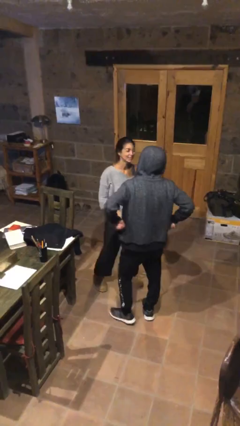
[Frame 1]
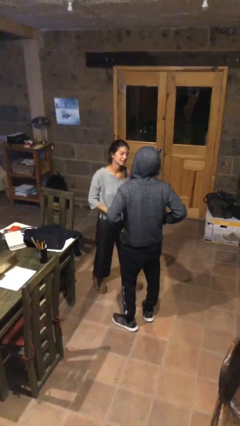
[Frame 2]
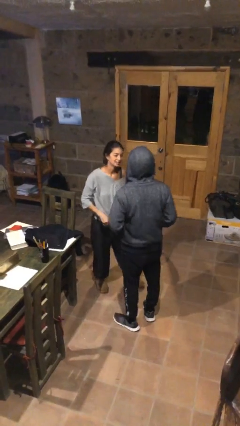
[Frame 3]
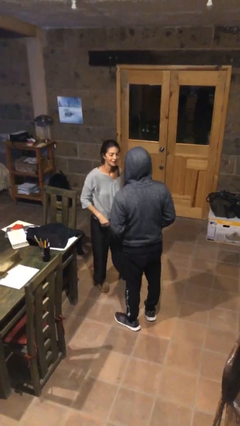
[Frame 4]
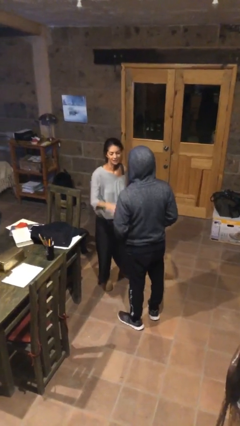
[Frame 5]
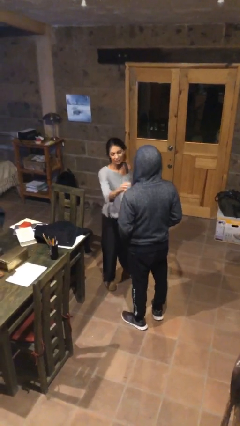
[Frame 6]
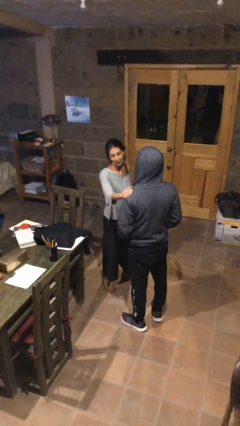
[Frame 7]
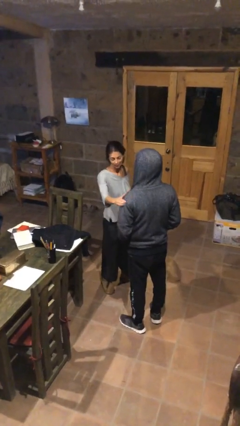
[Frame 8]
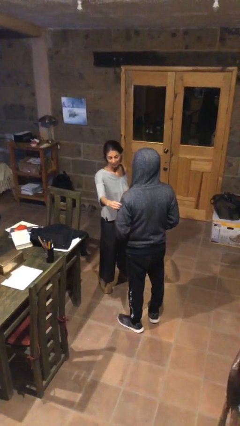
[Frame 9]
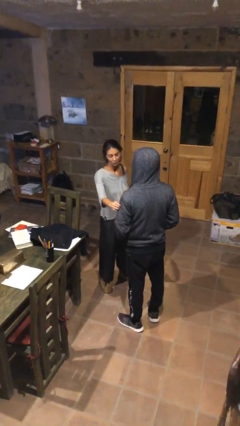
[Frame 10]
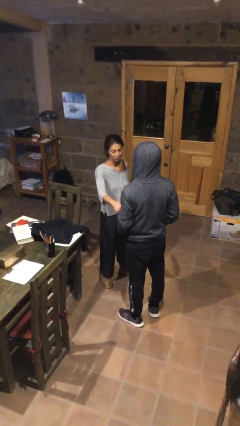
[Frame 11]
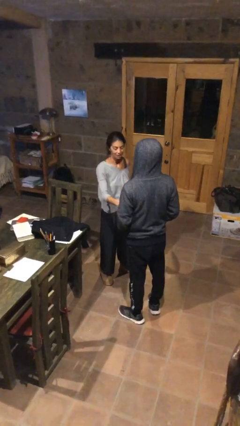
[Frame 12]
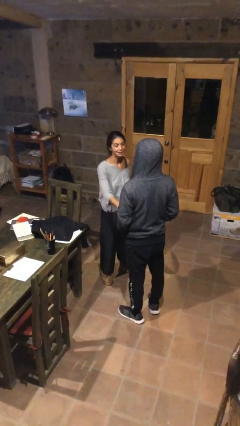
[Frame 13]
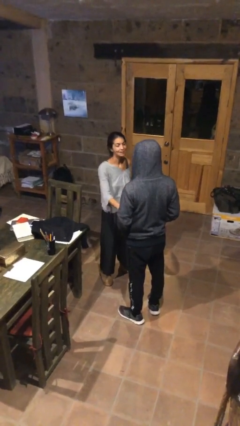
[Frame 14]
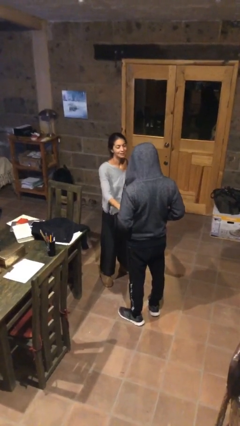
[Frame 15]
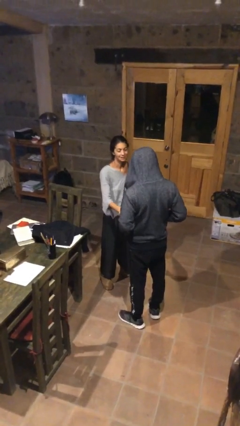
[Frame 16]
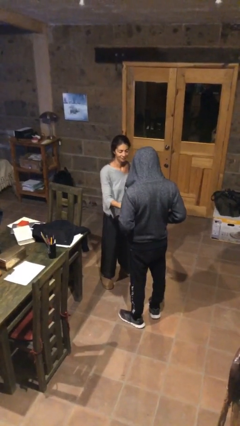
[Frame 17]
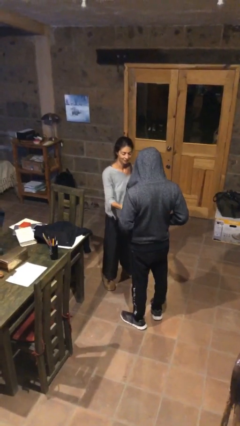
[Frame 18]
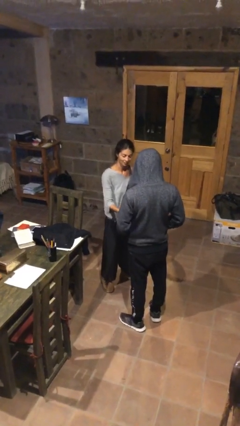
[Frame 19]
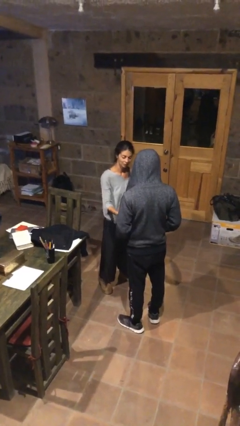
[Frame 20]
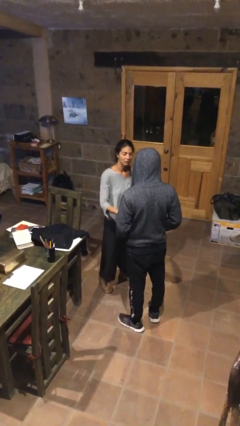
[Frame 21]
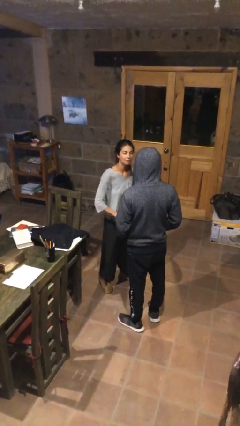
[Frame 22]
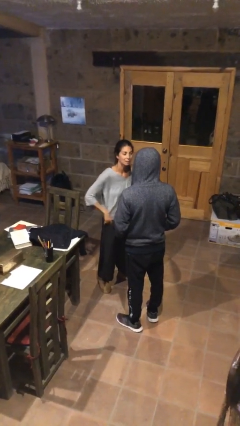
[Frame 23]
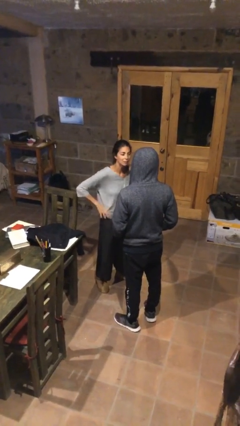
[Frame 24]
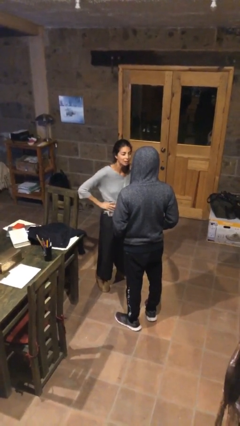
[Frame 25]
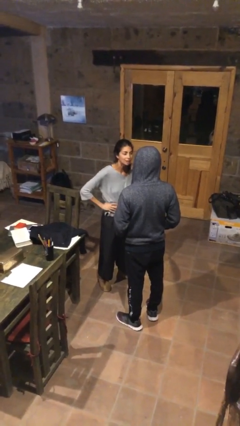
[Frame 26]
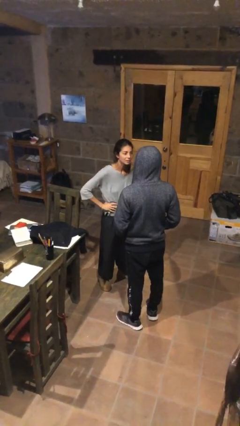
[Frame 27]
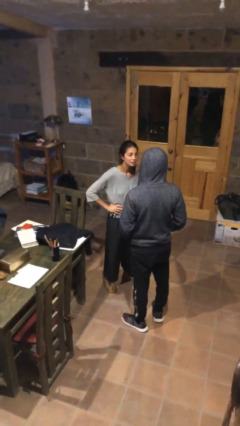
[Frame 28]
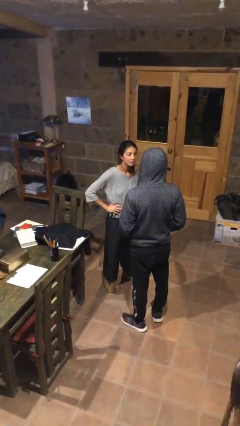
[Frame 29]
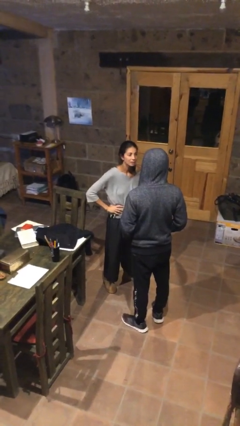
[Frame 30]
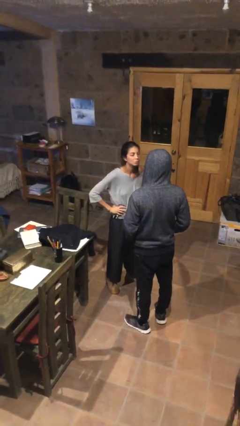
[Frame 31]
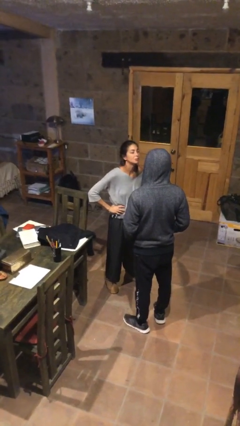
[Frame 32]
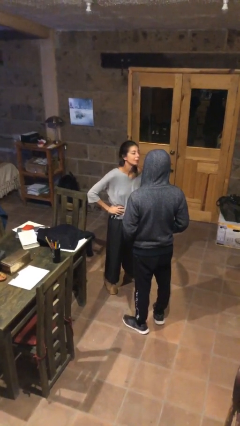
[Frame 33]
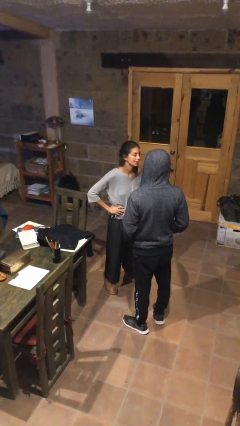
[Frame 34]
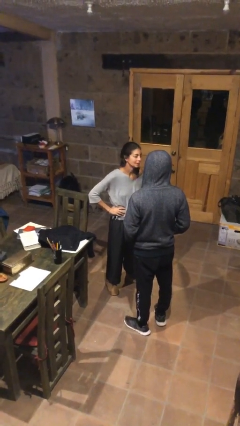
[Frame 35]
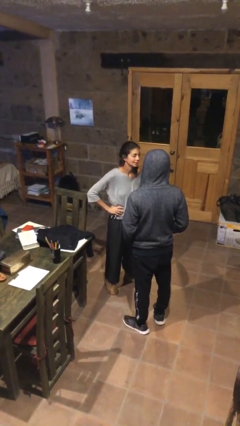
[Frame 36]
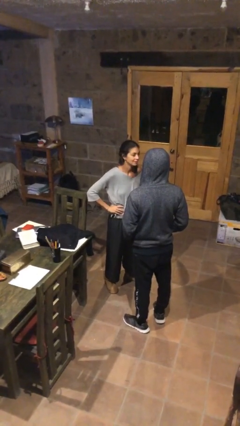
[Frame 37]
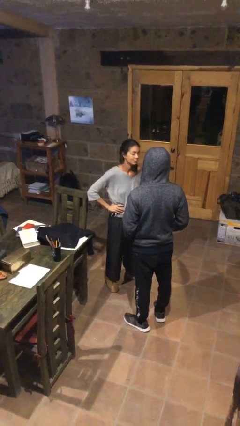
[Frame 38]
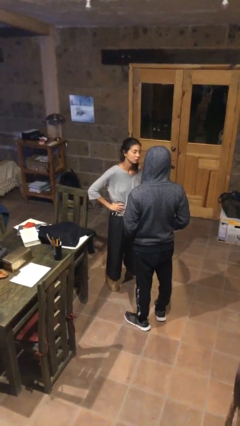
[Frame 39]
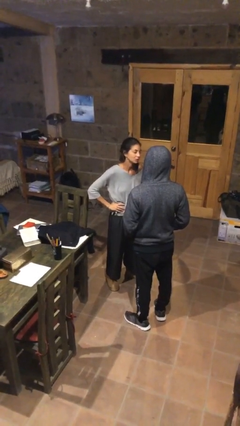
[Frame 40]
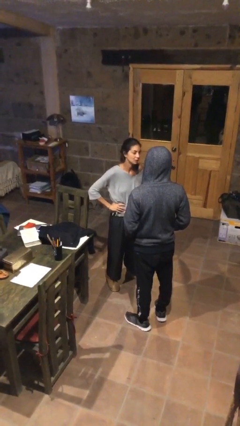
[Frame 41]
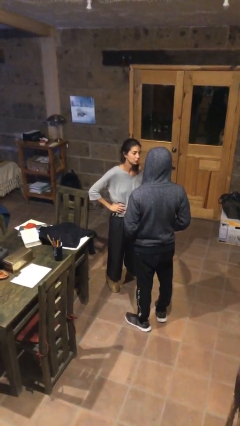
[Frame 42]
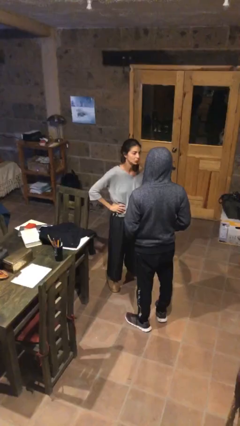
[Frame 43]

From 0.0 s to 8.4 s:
person talks to person

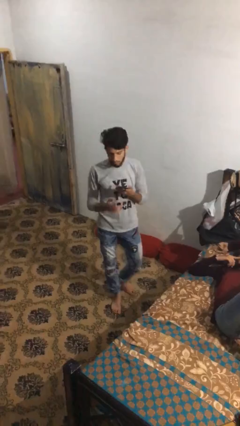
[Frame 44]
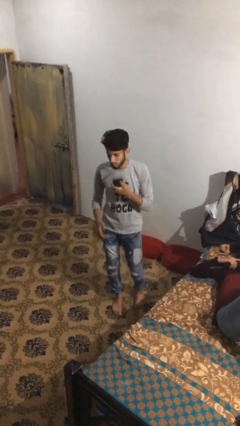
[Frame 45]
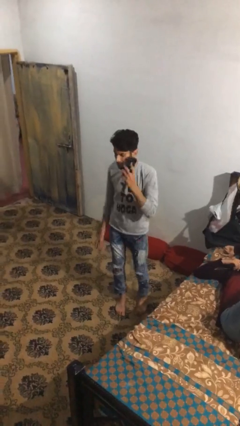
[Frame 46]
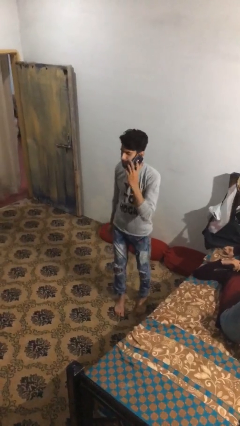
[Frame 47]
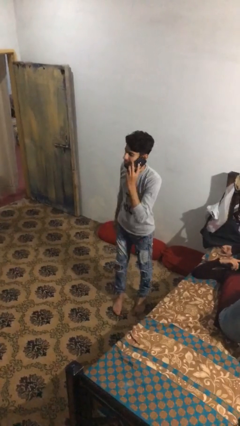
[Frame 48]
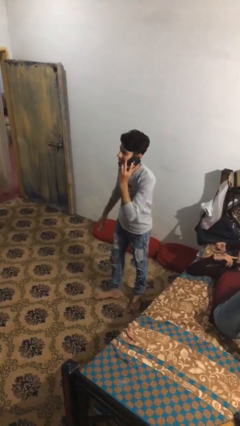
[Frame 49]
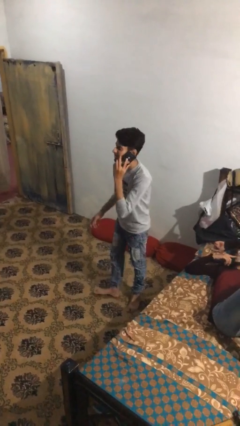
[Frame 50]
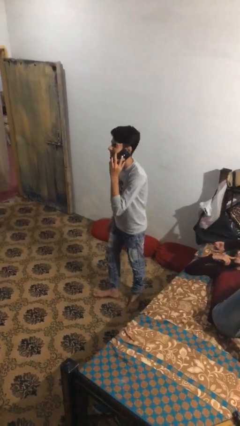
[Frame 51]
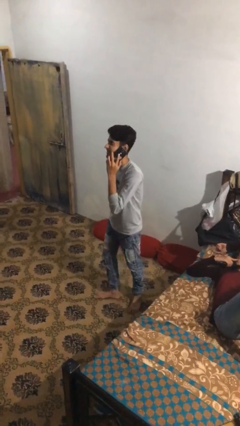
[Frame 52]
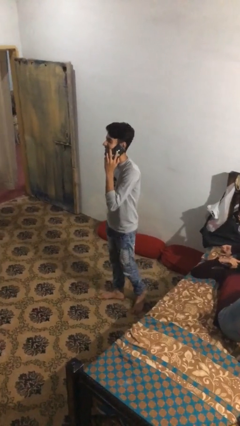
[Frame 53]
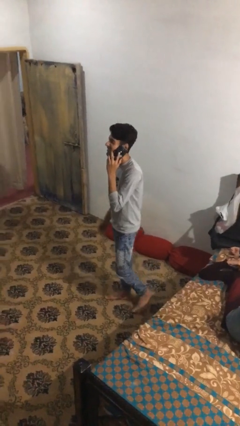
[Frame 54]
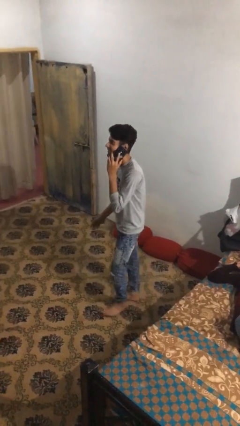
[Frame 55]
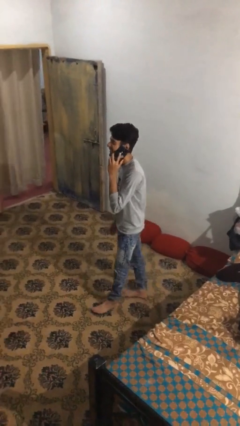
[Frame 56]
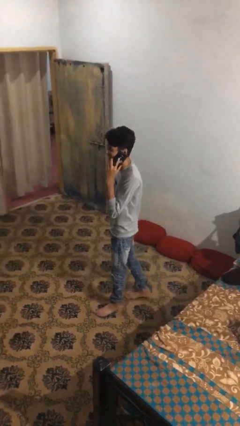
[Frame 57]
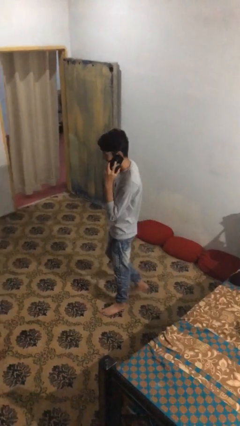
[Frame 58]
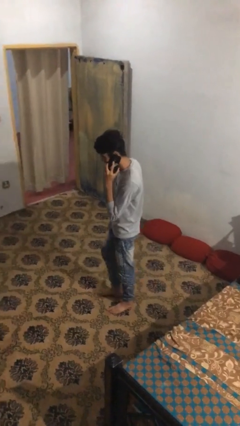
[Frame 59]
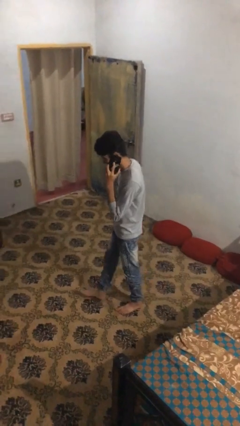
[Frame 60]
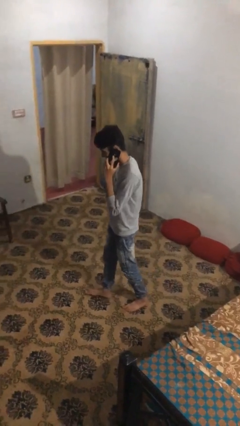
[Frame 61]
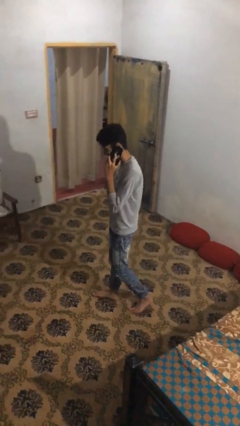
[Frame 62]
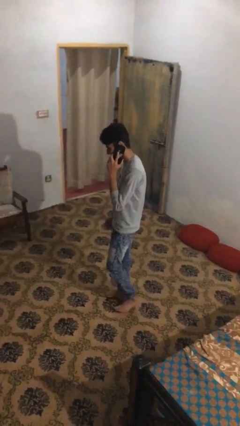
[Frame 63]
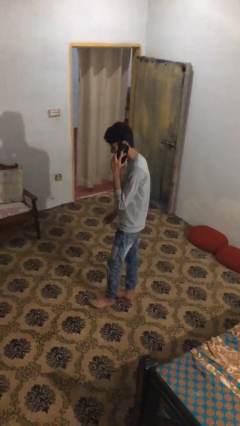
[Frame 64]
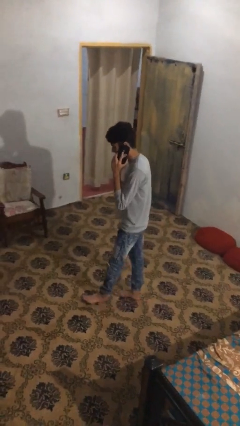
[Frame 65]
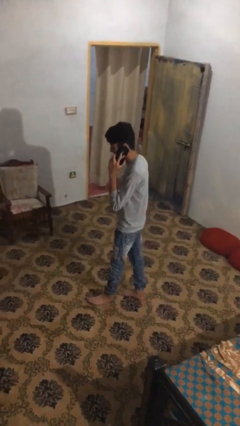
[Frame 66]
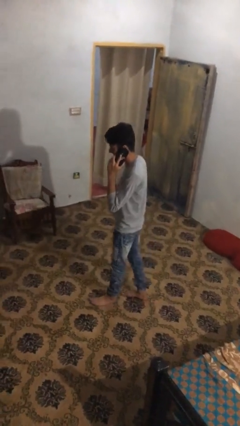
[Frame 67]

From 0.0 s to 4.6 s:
person talks on phone

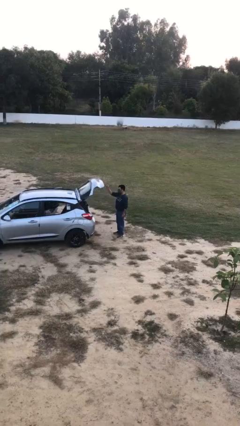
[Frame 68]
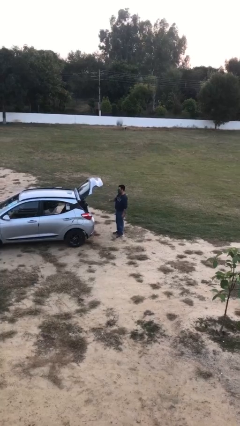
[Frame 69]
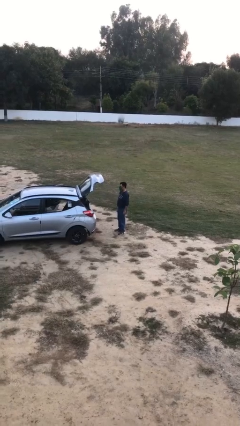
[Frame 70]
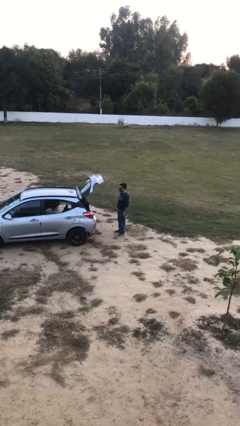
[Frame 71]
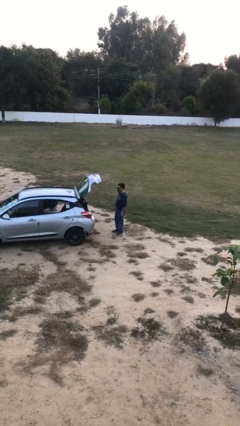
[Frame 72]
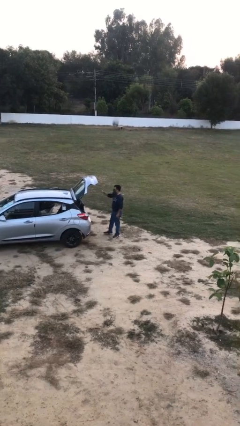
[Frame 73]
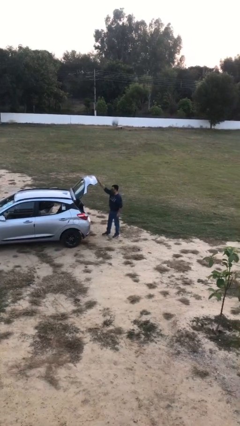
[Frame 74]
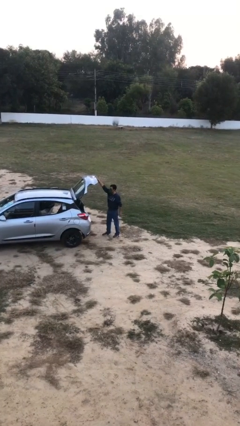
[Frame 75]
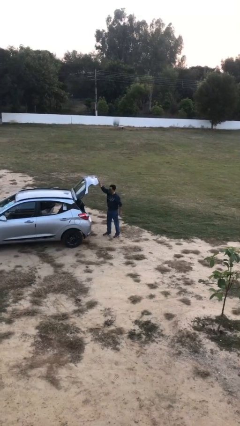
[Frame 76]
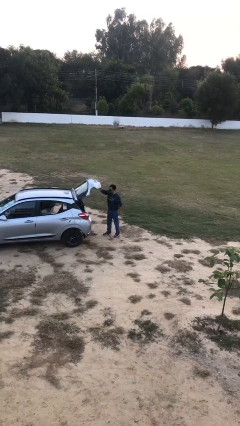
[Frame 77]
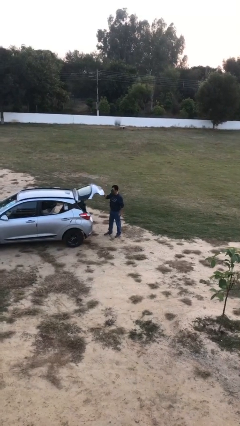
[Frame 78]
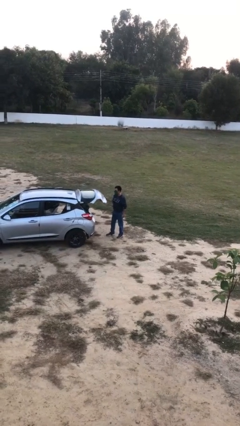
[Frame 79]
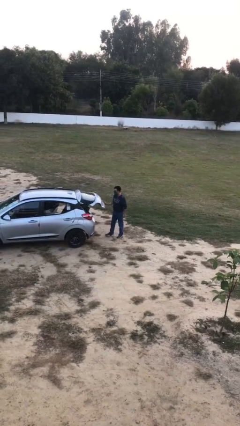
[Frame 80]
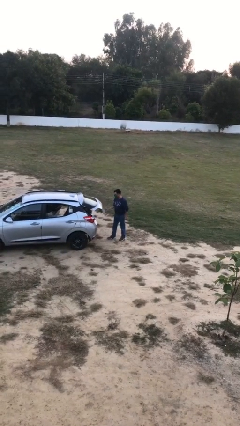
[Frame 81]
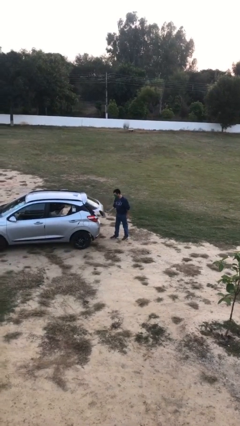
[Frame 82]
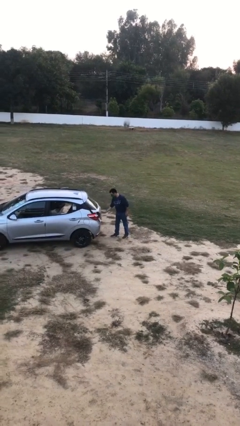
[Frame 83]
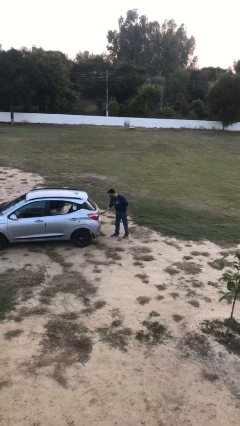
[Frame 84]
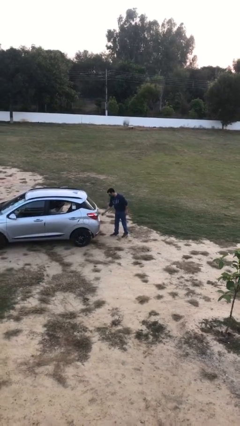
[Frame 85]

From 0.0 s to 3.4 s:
person closes car trunk

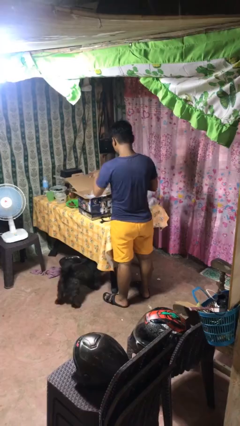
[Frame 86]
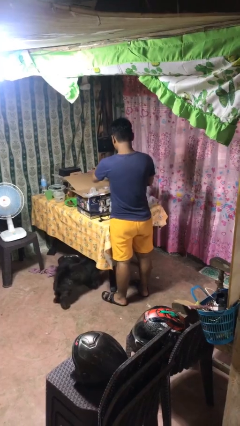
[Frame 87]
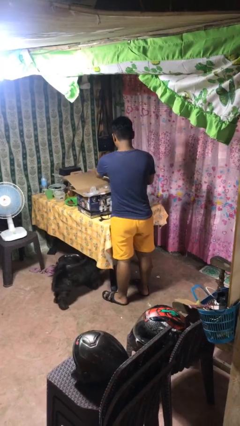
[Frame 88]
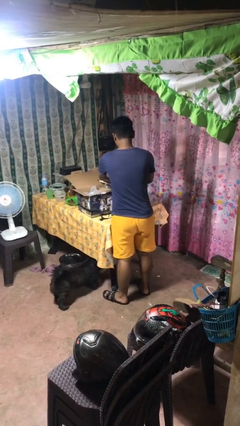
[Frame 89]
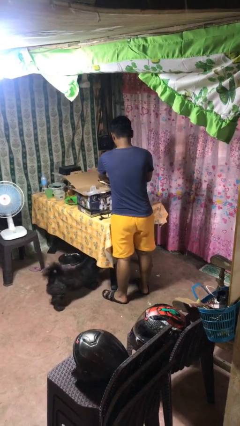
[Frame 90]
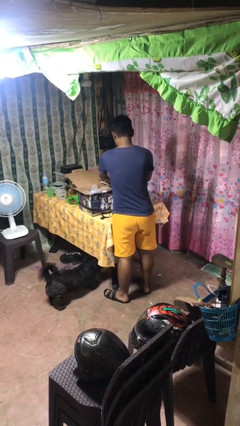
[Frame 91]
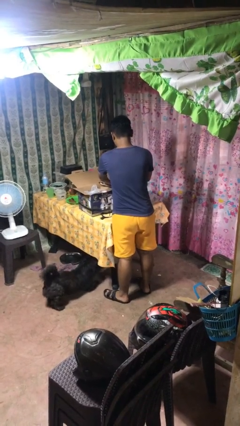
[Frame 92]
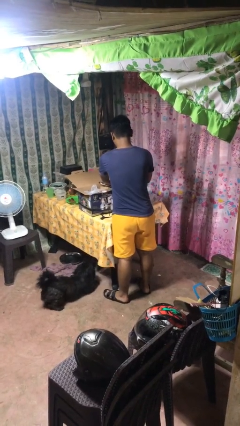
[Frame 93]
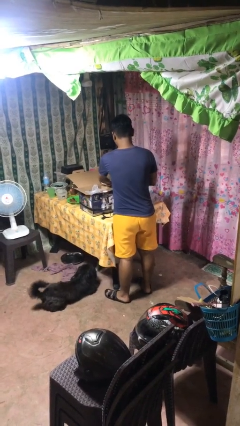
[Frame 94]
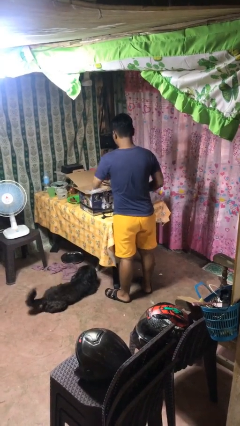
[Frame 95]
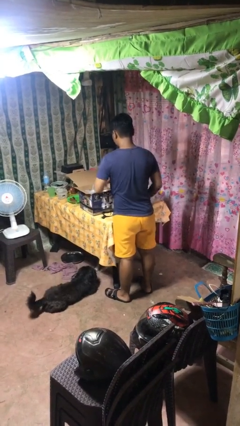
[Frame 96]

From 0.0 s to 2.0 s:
person puts object into box
